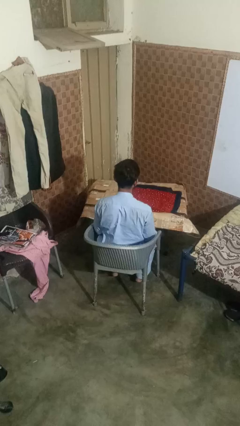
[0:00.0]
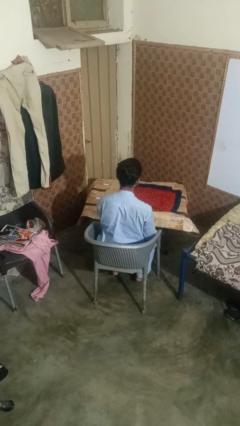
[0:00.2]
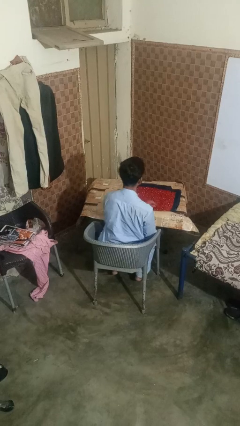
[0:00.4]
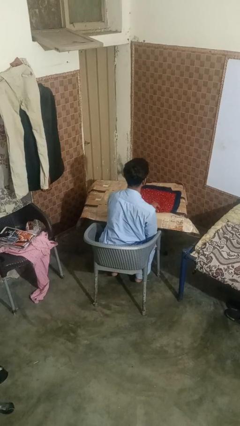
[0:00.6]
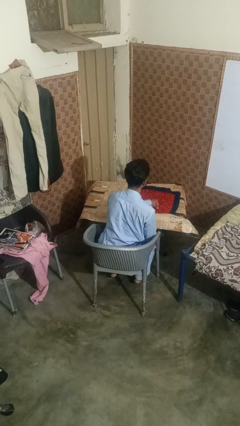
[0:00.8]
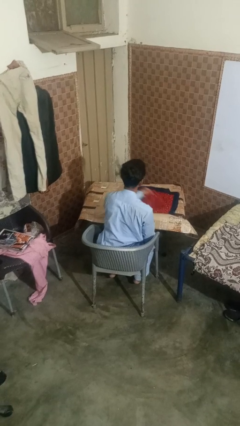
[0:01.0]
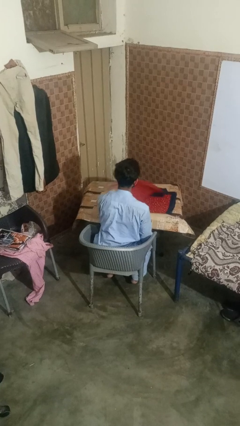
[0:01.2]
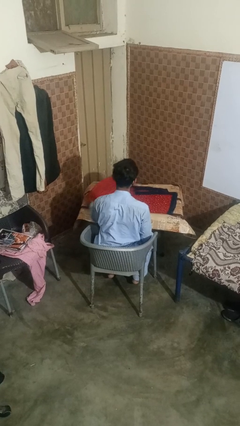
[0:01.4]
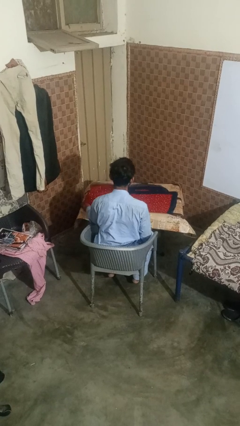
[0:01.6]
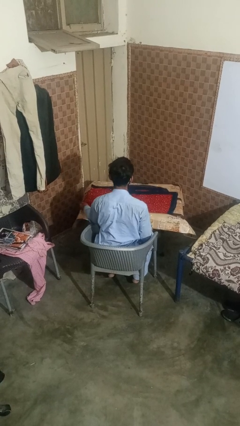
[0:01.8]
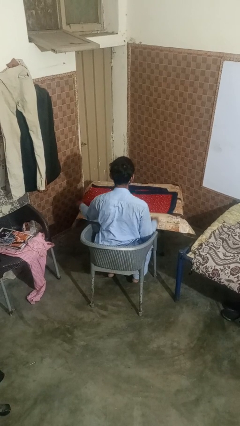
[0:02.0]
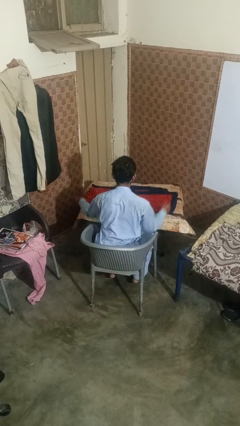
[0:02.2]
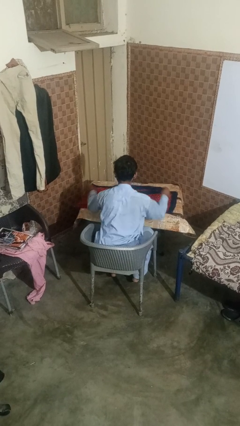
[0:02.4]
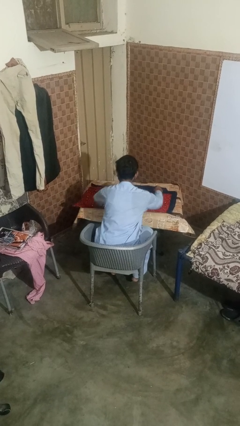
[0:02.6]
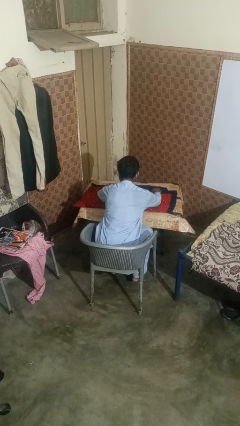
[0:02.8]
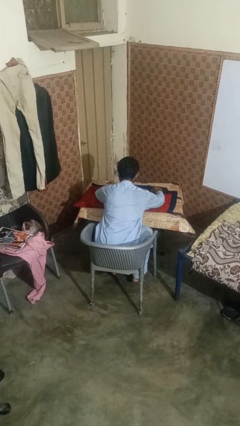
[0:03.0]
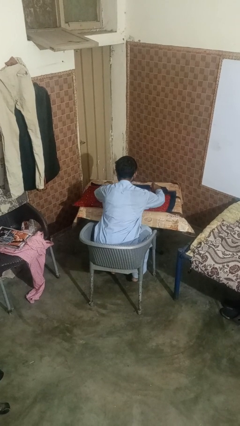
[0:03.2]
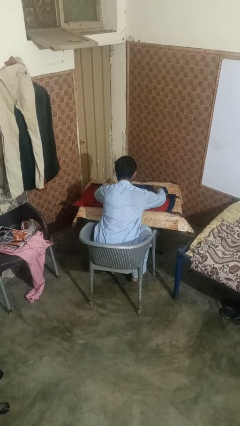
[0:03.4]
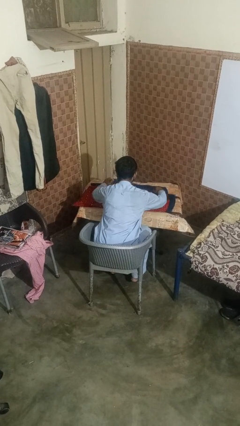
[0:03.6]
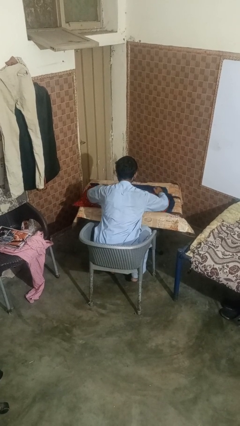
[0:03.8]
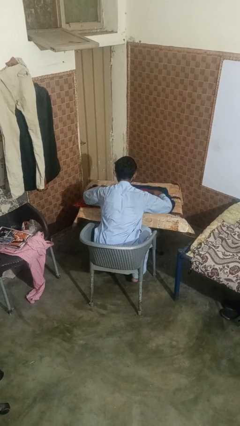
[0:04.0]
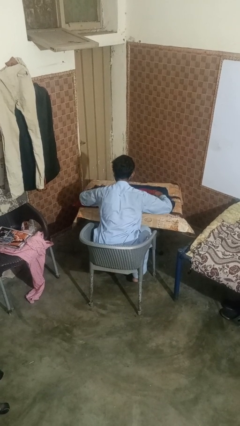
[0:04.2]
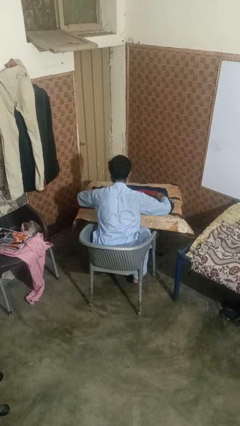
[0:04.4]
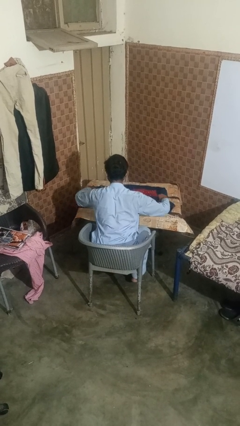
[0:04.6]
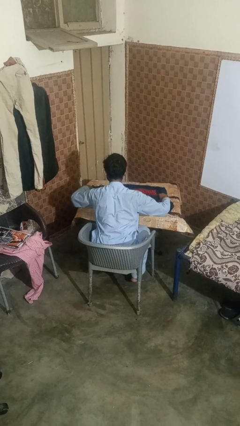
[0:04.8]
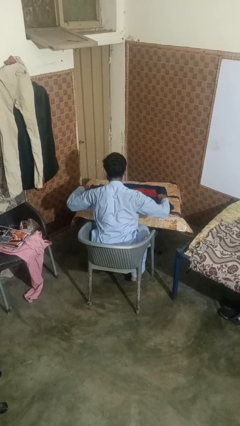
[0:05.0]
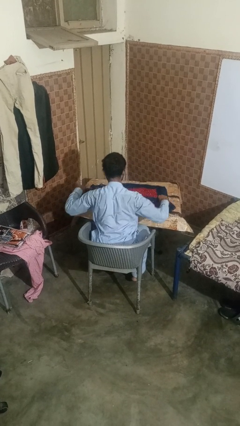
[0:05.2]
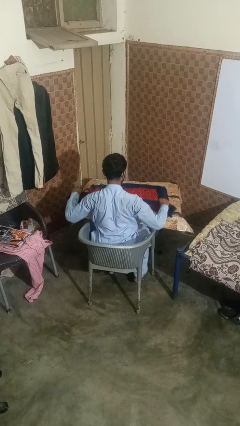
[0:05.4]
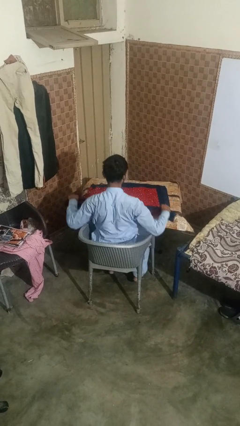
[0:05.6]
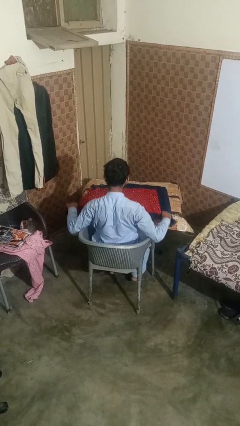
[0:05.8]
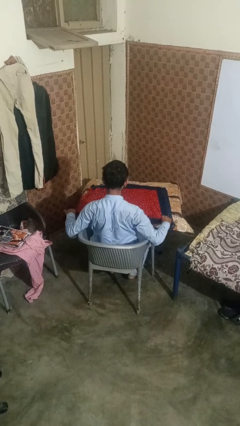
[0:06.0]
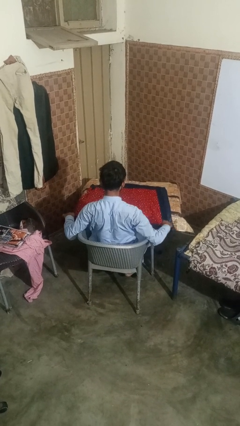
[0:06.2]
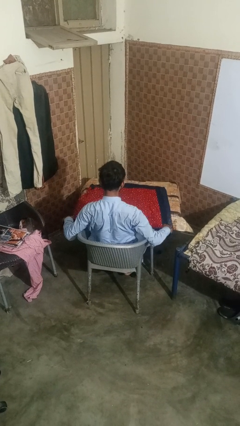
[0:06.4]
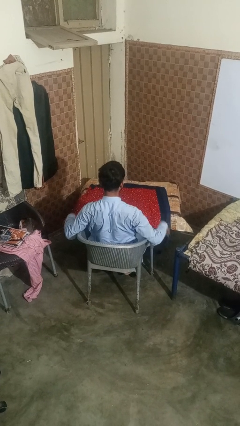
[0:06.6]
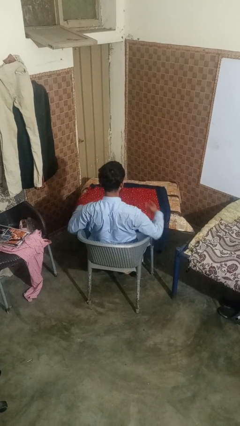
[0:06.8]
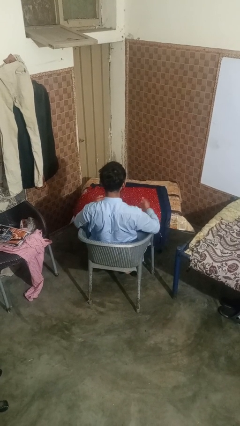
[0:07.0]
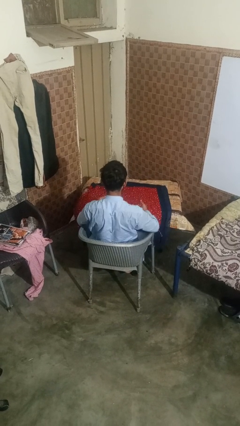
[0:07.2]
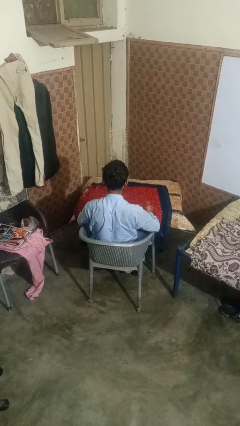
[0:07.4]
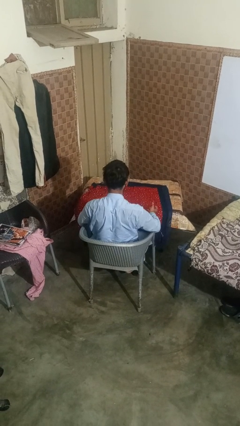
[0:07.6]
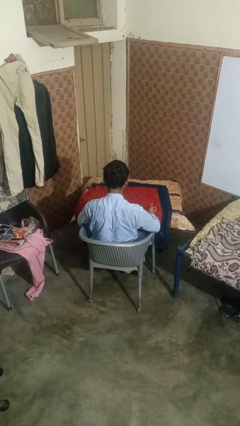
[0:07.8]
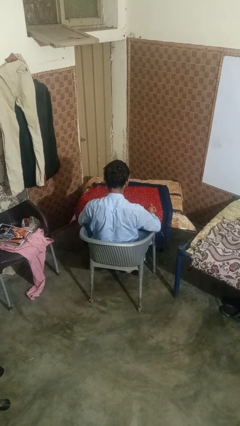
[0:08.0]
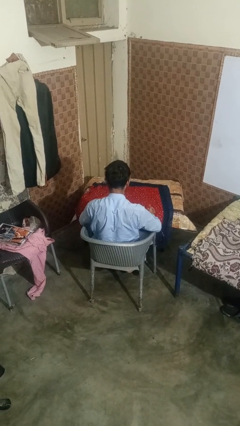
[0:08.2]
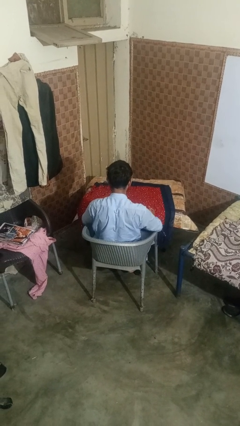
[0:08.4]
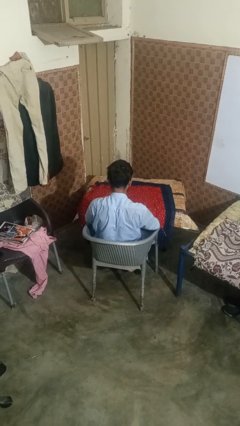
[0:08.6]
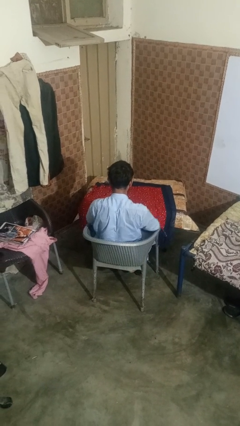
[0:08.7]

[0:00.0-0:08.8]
person spreads tablecloth

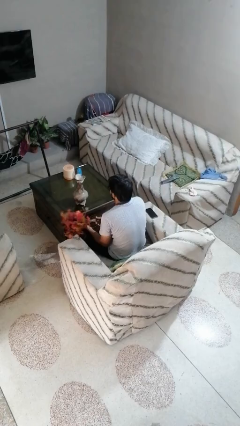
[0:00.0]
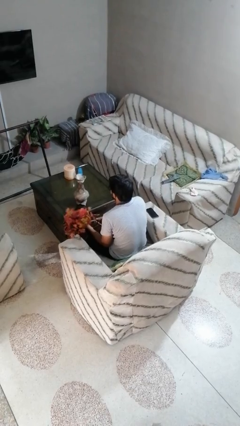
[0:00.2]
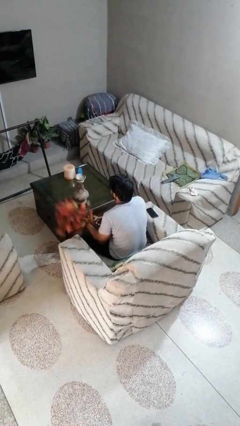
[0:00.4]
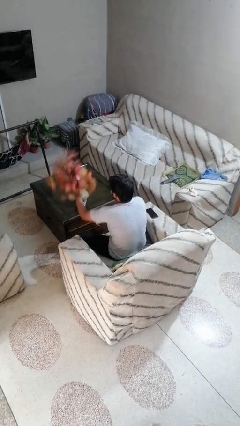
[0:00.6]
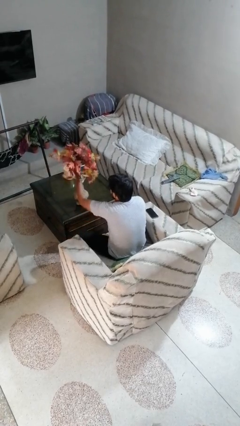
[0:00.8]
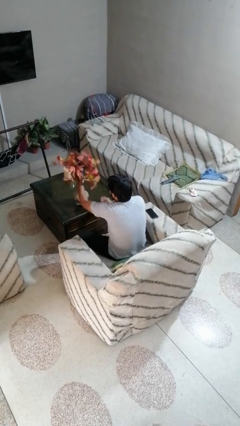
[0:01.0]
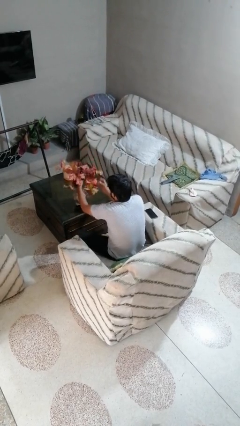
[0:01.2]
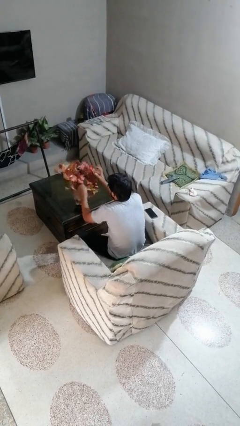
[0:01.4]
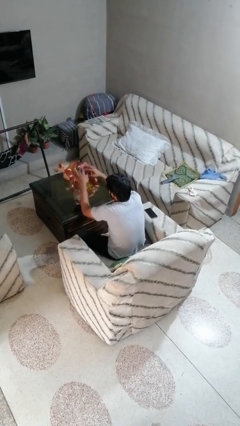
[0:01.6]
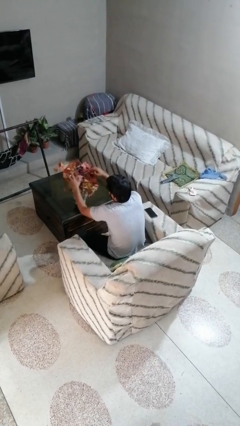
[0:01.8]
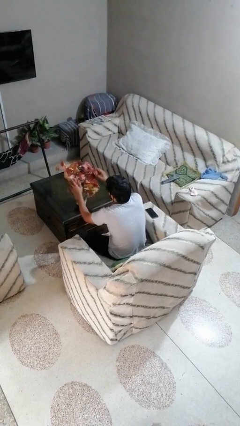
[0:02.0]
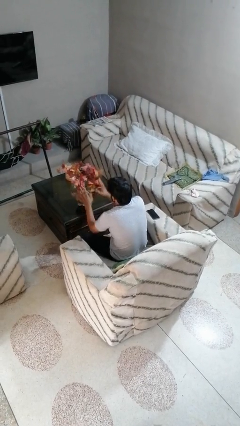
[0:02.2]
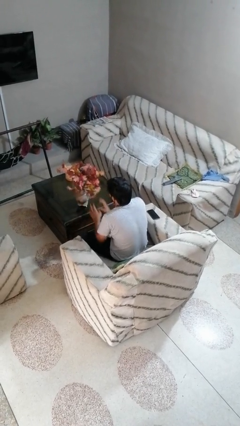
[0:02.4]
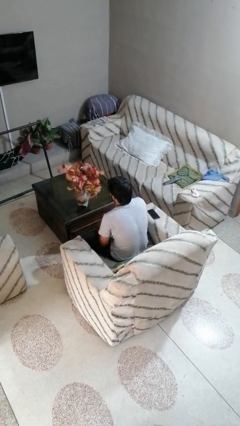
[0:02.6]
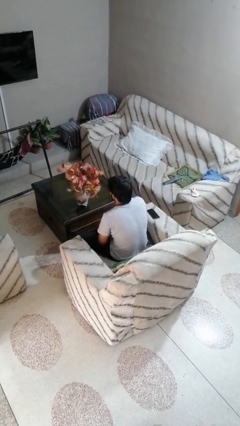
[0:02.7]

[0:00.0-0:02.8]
person arranges flowers in vase

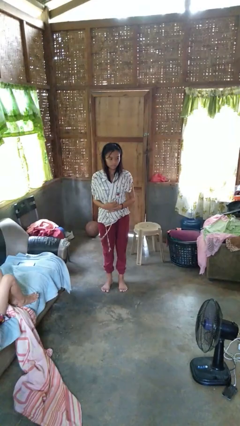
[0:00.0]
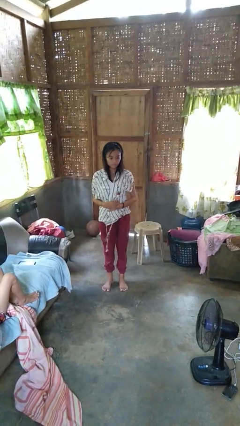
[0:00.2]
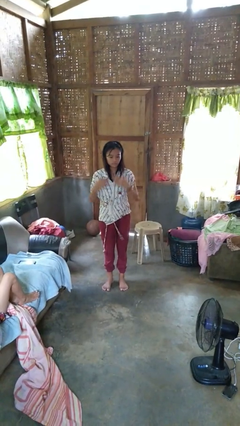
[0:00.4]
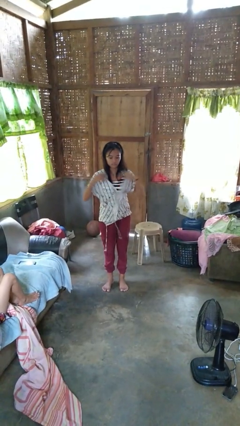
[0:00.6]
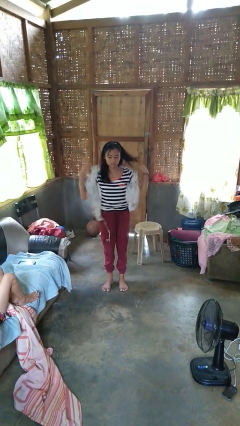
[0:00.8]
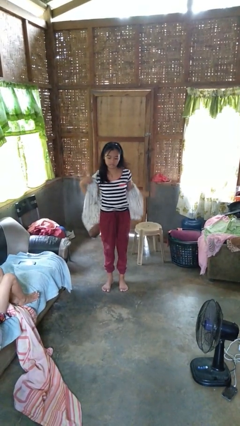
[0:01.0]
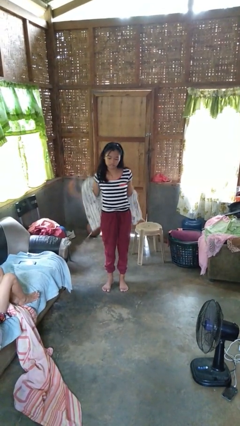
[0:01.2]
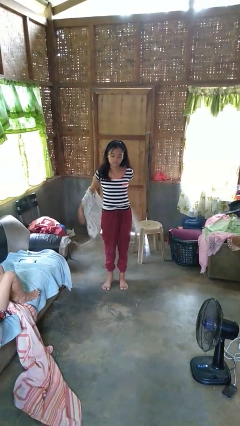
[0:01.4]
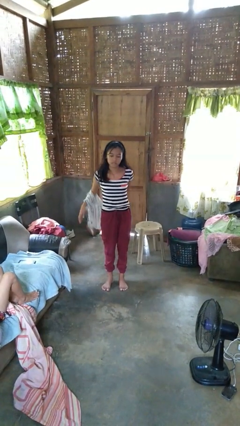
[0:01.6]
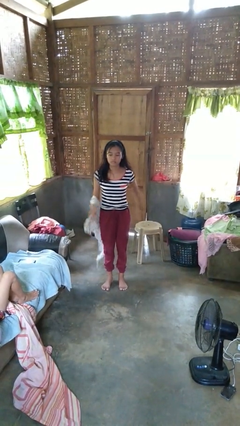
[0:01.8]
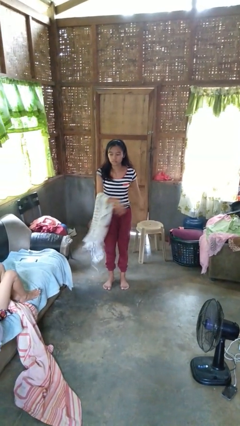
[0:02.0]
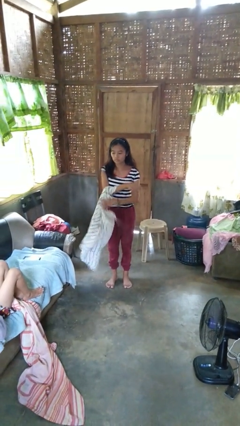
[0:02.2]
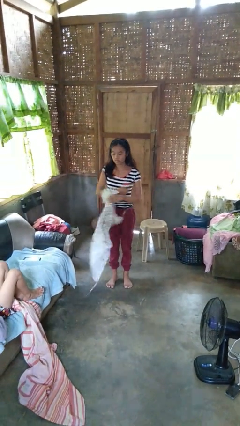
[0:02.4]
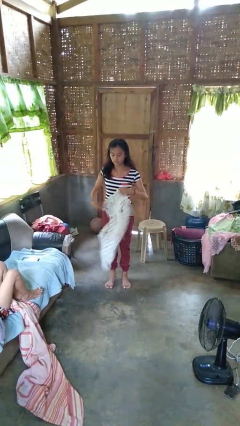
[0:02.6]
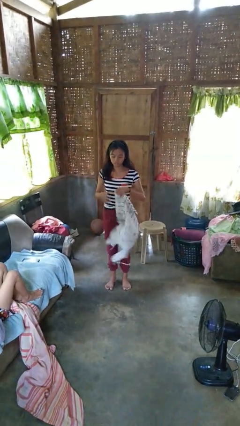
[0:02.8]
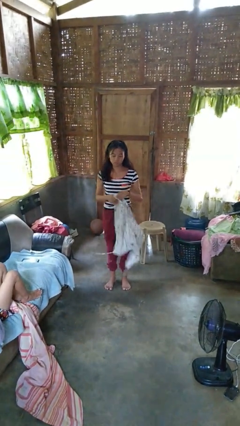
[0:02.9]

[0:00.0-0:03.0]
person takes off shirt

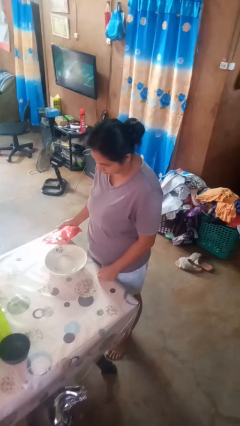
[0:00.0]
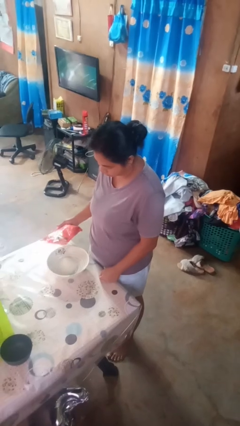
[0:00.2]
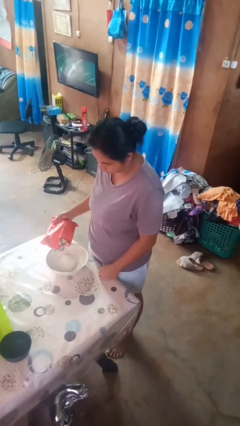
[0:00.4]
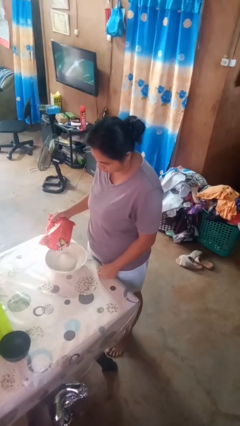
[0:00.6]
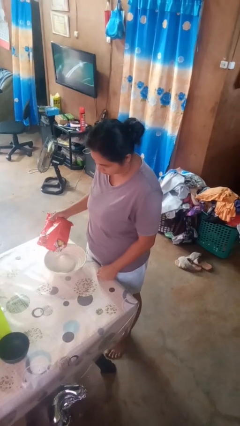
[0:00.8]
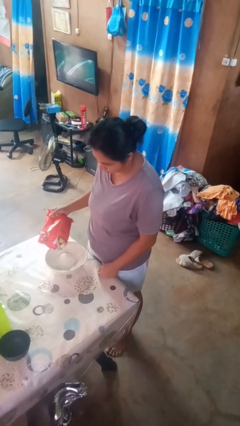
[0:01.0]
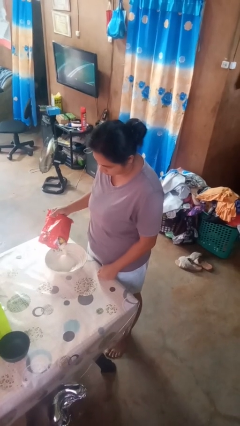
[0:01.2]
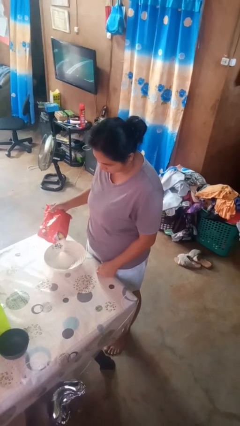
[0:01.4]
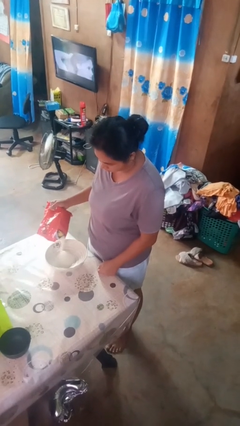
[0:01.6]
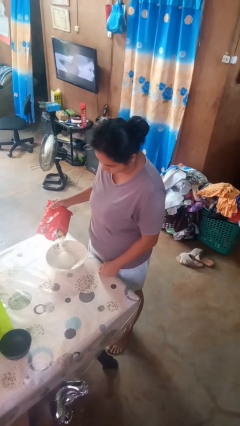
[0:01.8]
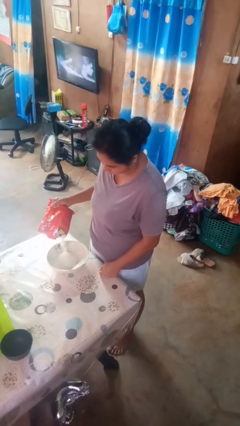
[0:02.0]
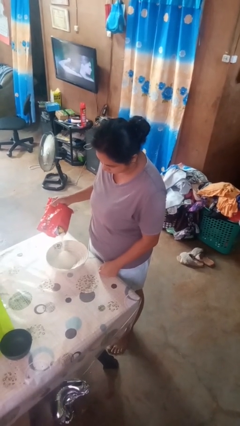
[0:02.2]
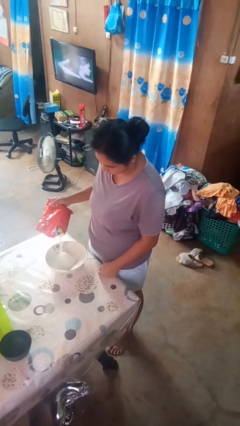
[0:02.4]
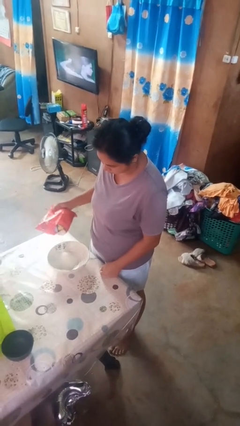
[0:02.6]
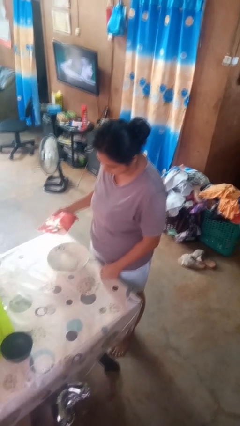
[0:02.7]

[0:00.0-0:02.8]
person pours into bowl

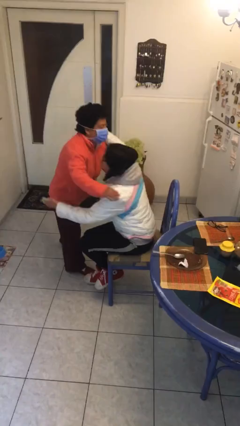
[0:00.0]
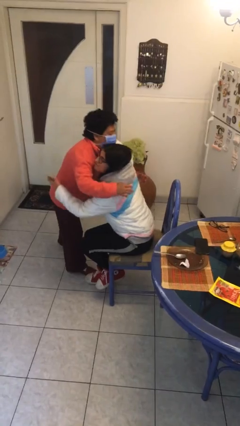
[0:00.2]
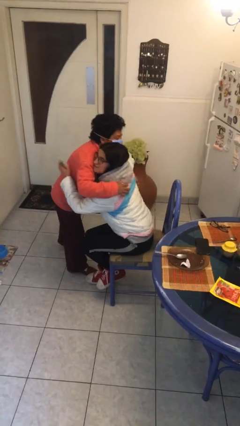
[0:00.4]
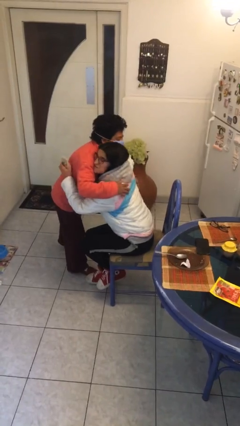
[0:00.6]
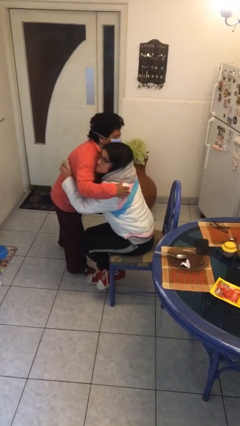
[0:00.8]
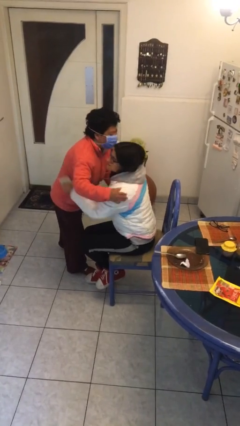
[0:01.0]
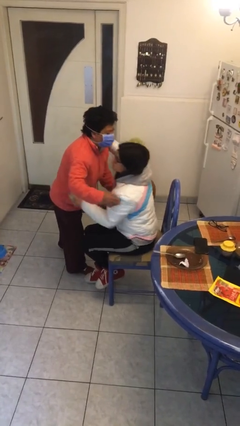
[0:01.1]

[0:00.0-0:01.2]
person embraces person
